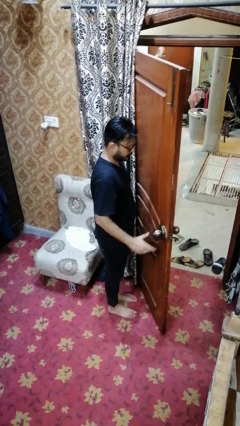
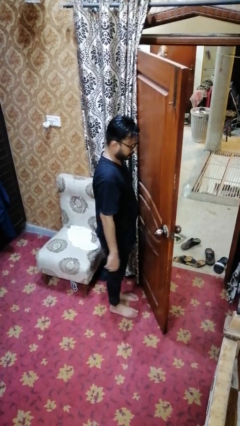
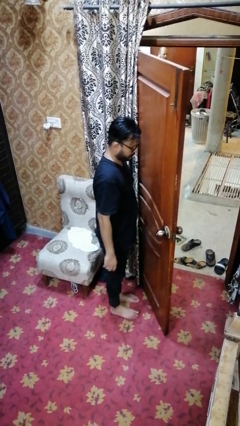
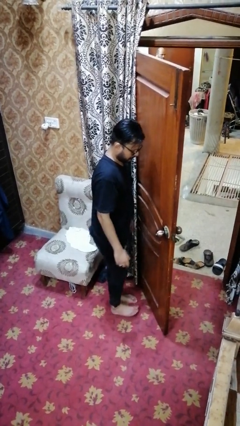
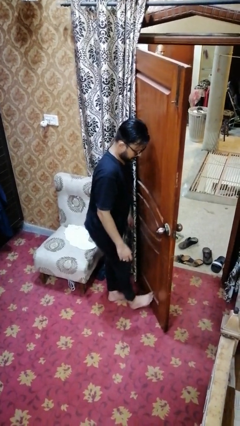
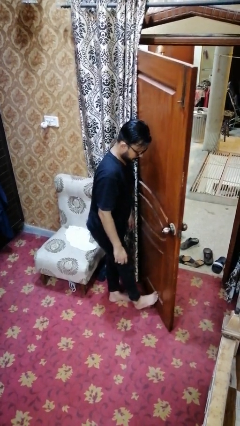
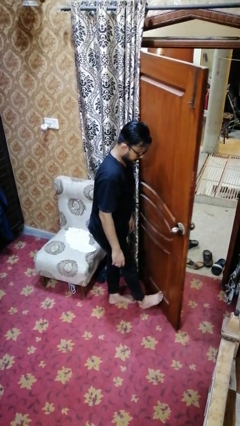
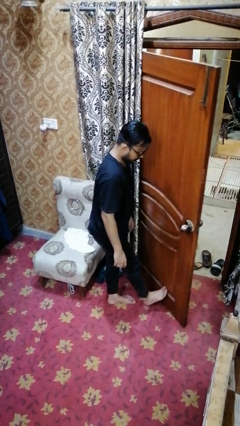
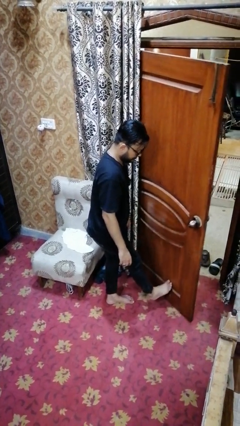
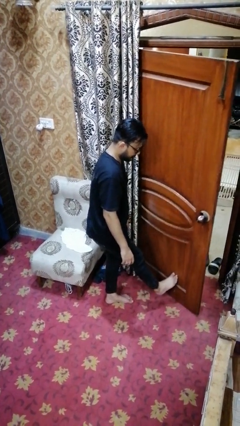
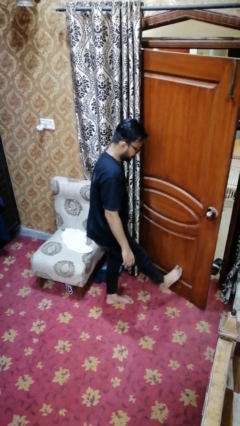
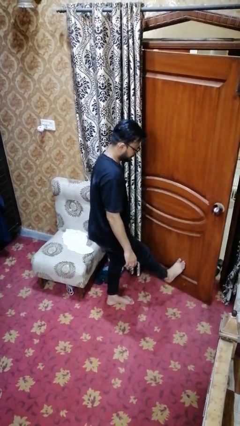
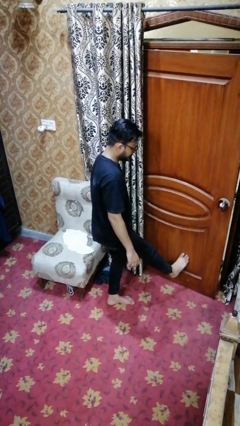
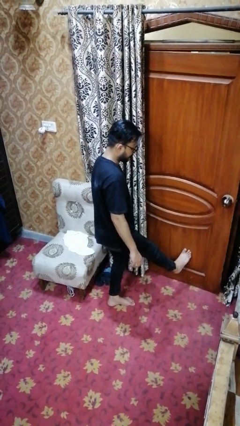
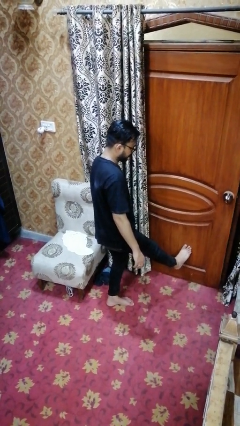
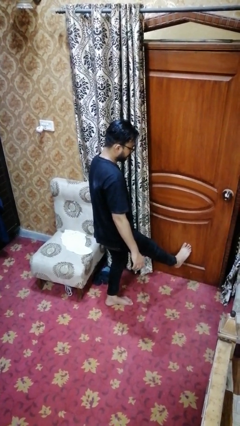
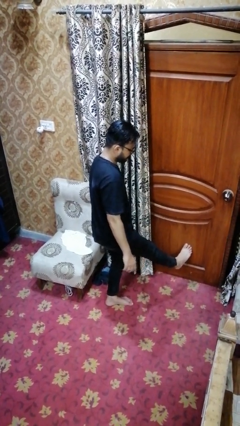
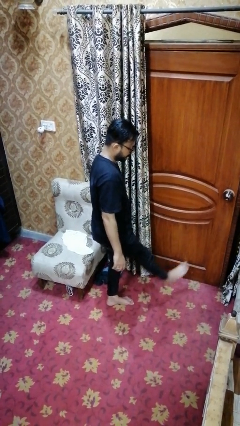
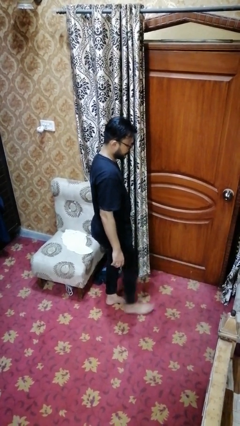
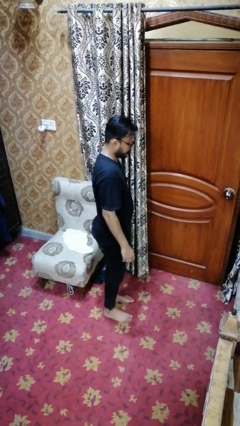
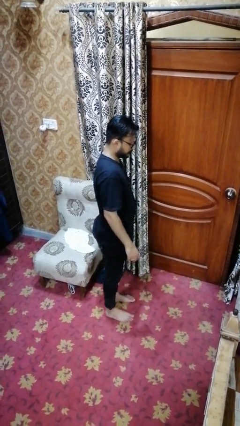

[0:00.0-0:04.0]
person closes door with foot

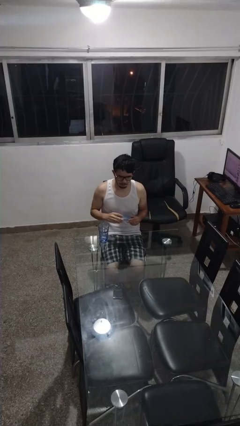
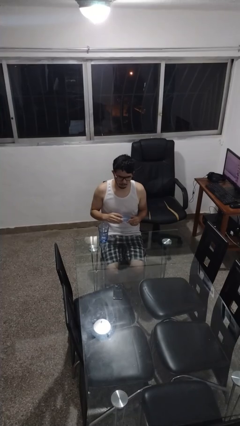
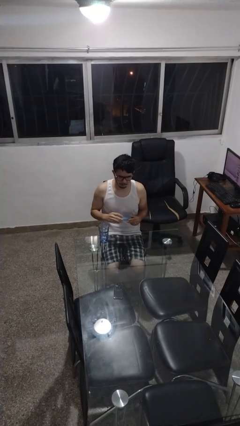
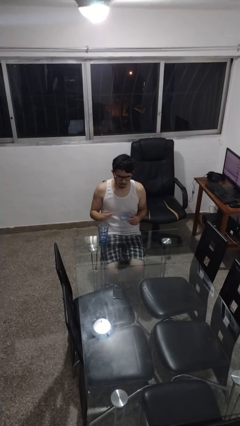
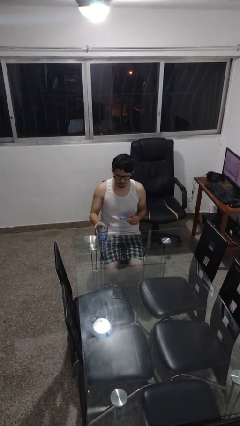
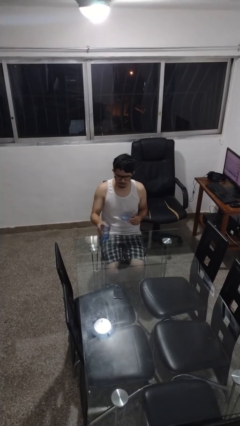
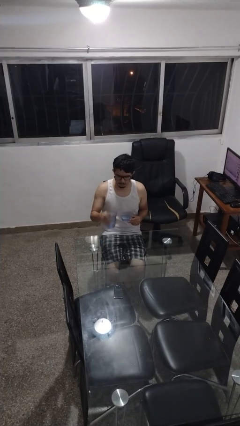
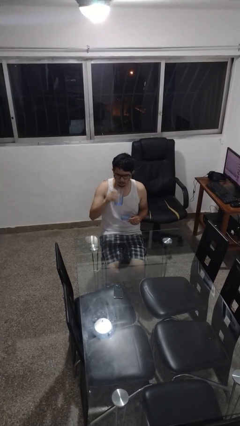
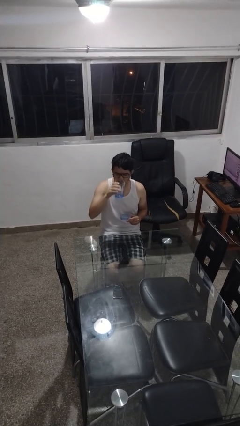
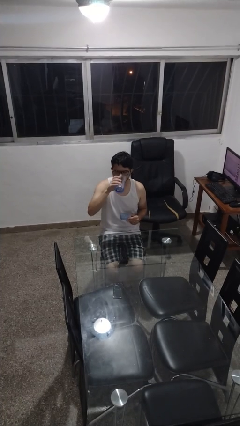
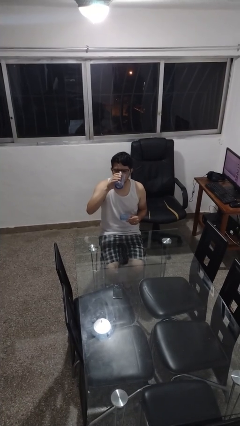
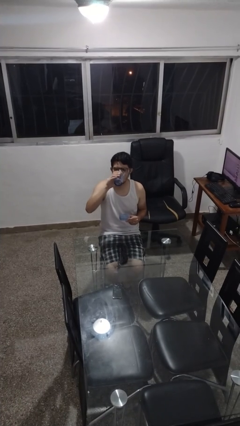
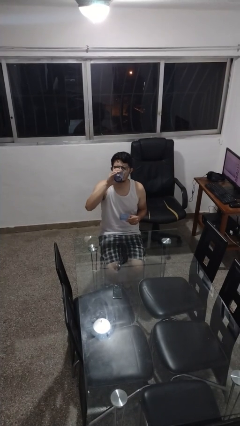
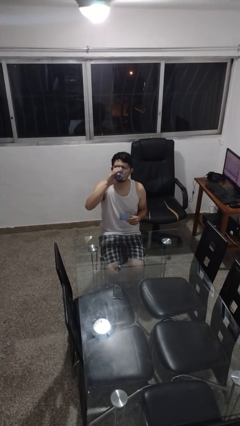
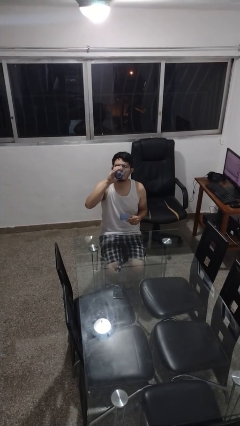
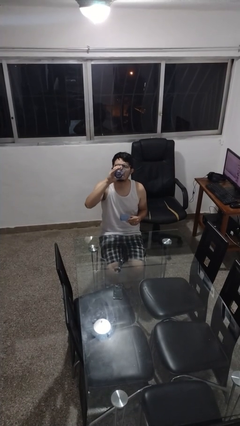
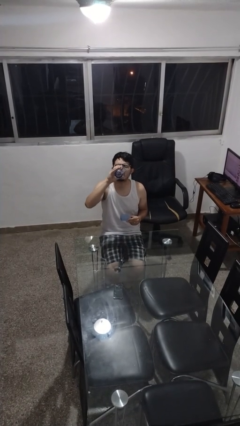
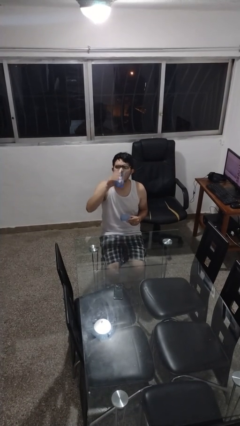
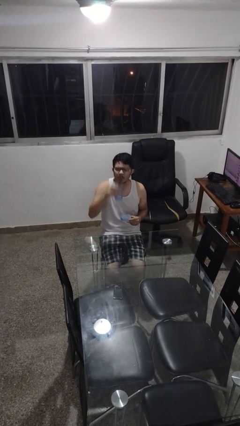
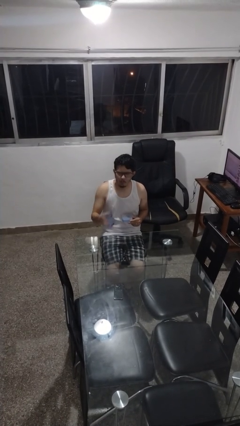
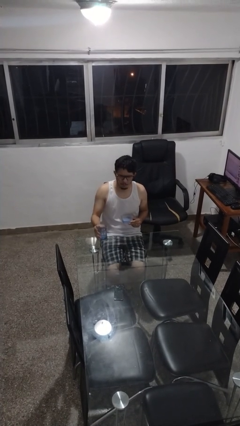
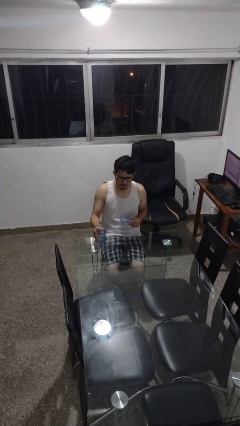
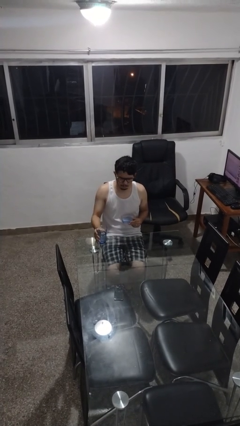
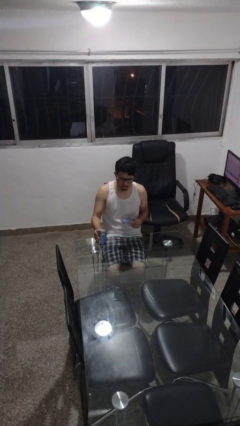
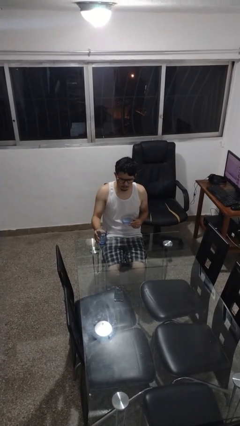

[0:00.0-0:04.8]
person drinks from cup

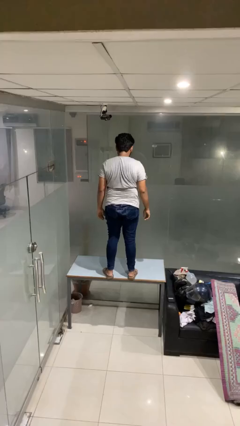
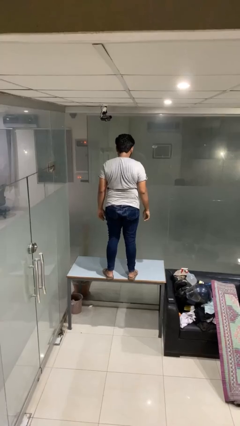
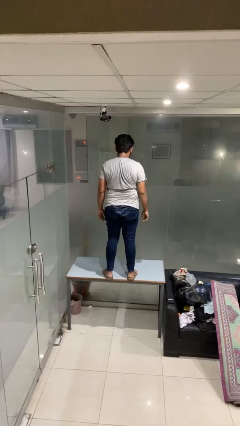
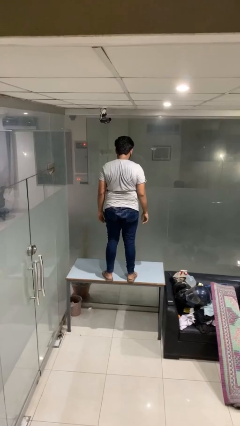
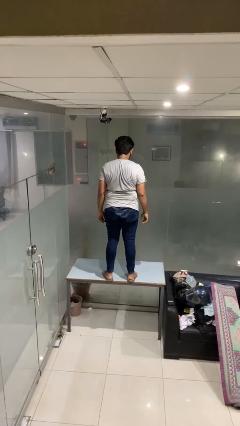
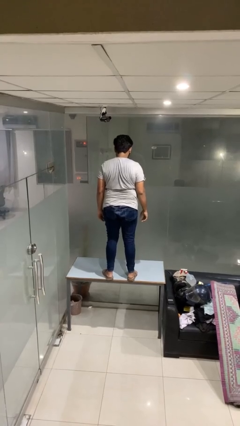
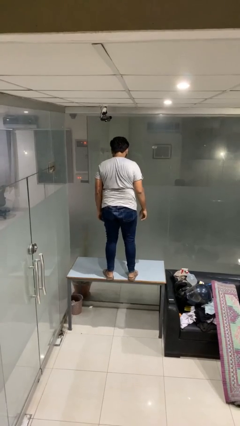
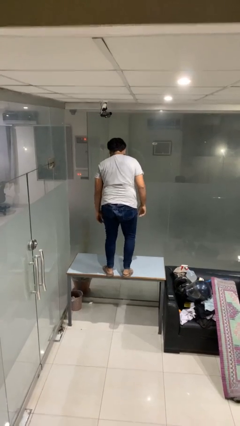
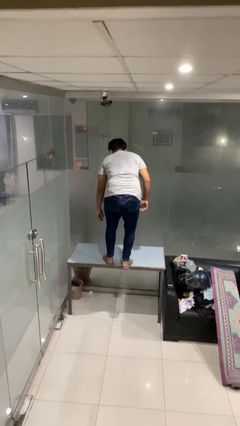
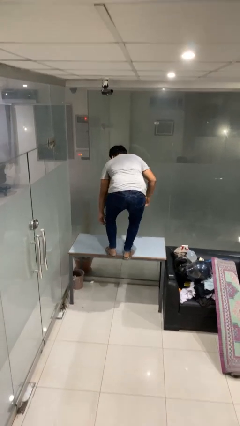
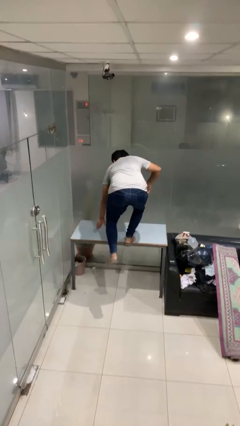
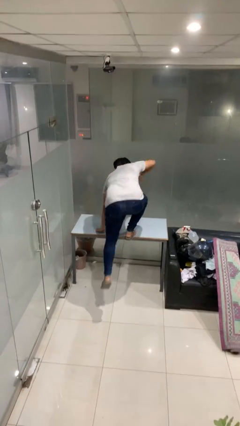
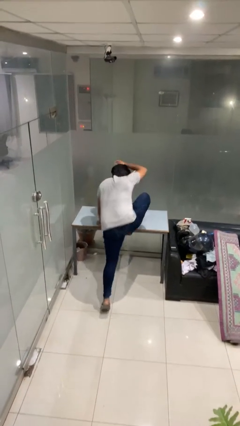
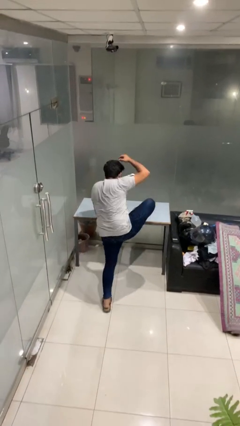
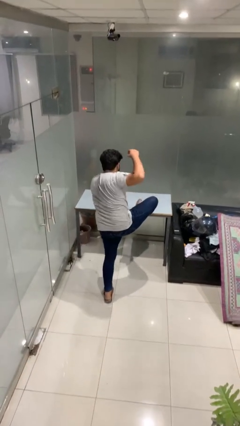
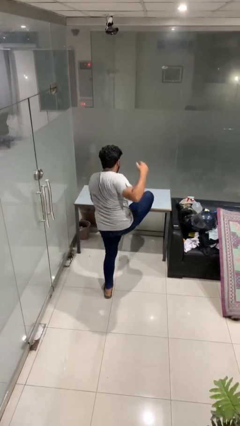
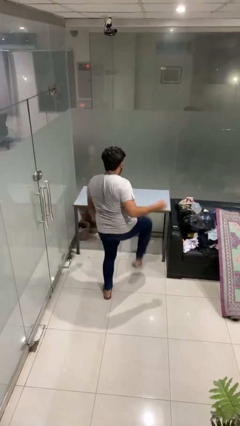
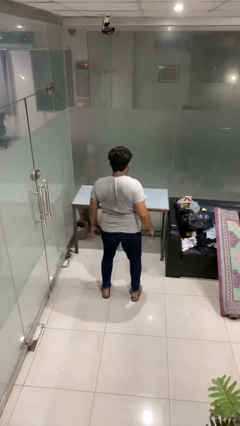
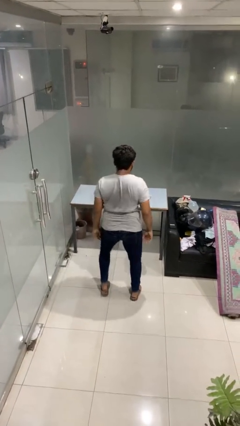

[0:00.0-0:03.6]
person climbs off table

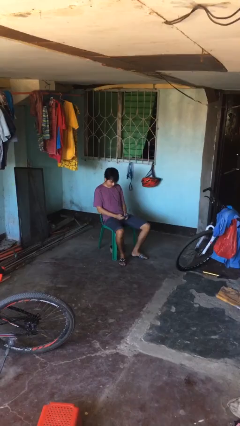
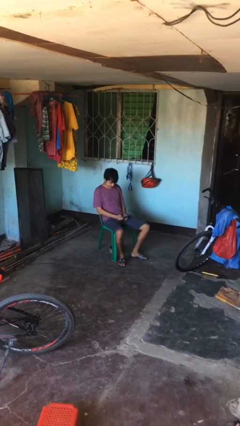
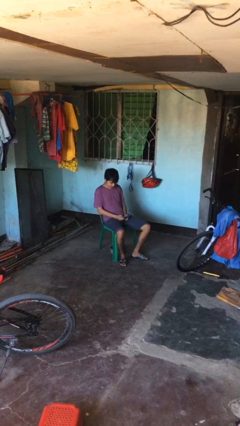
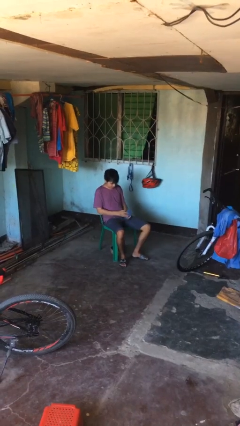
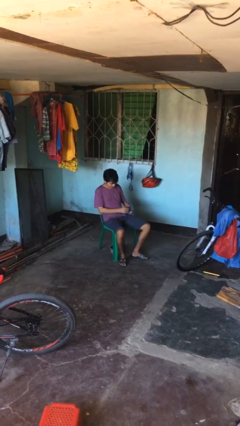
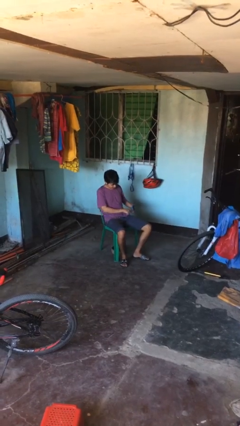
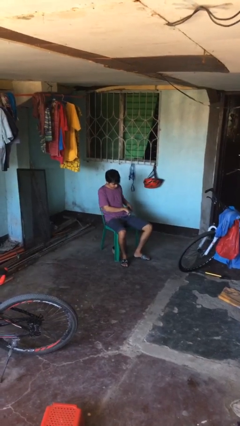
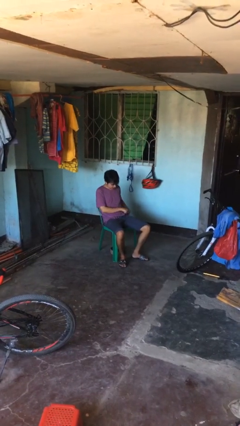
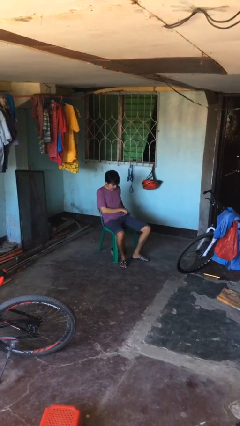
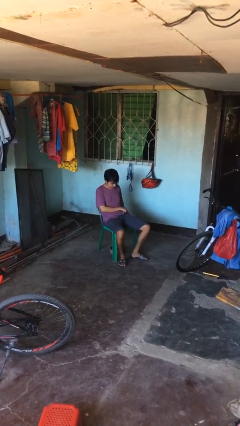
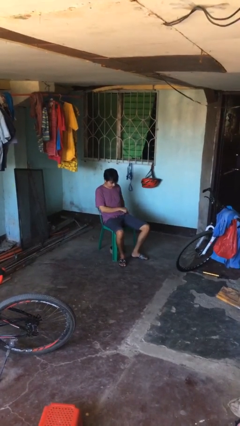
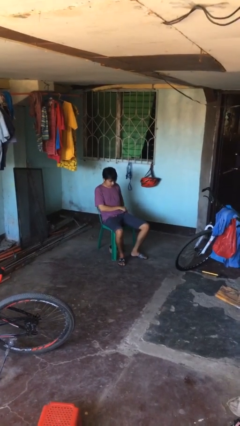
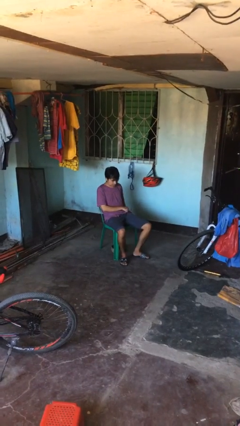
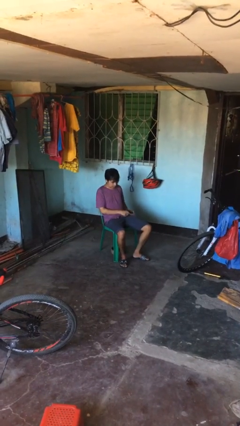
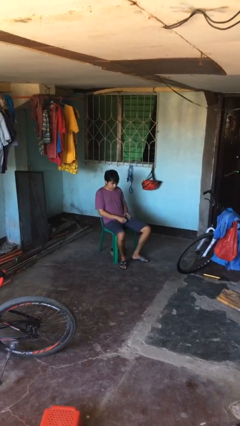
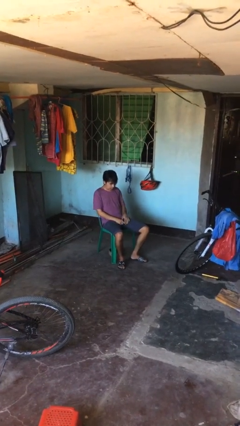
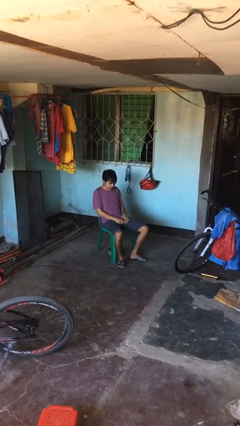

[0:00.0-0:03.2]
person puts phone into pocket

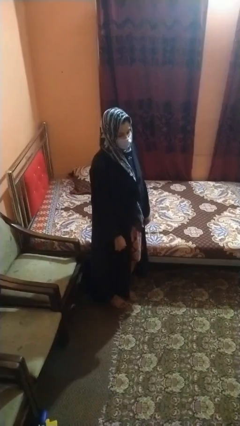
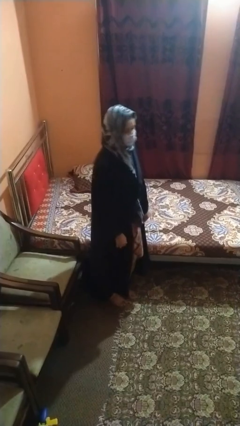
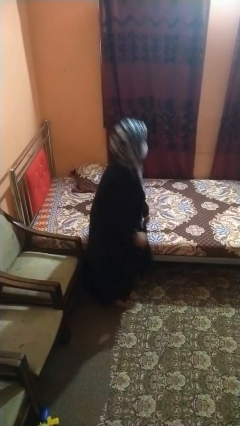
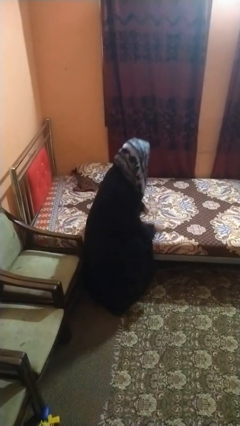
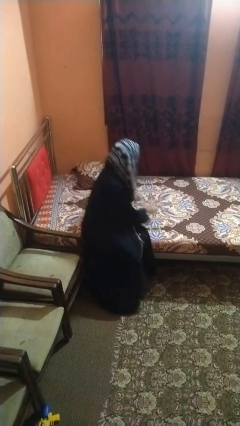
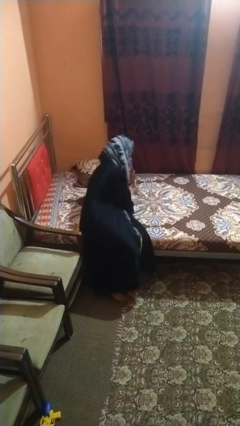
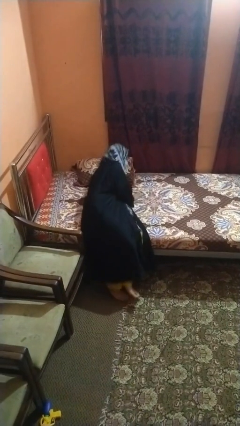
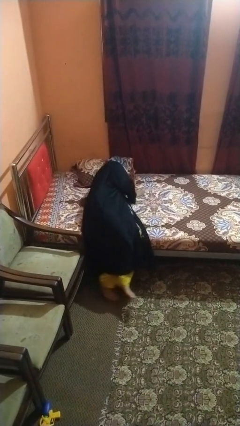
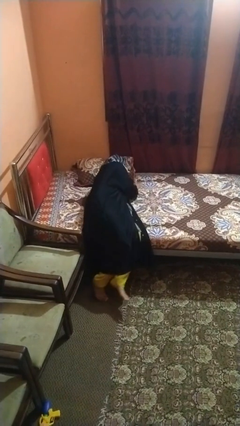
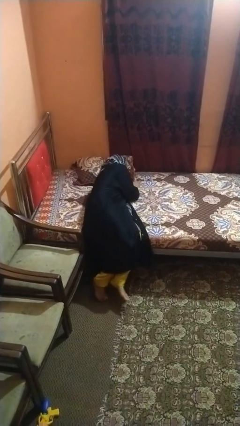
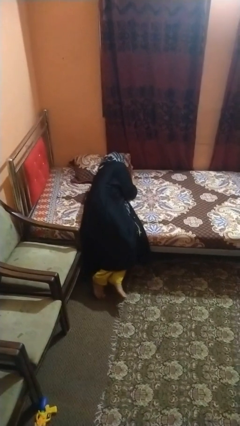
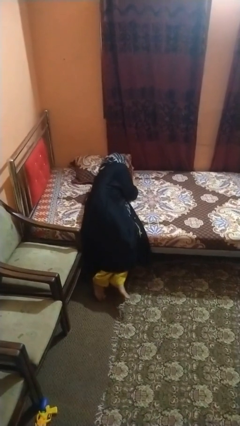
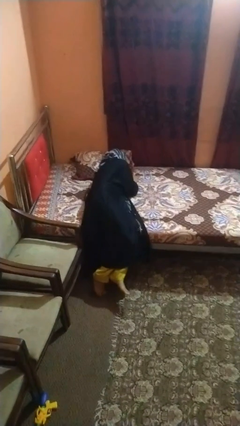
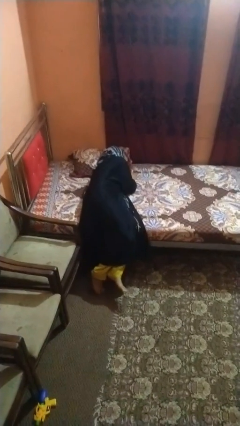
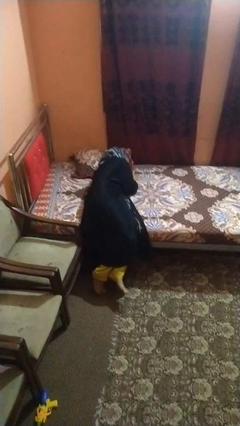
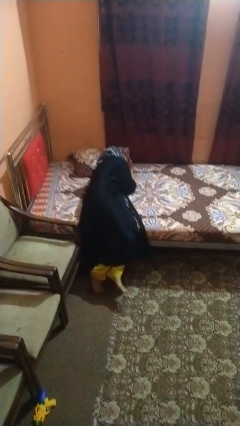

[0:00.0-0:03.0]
person lies down on bed
